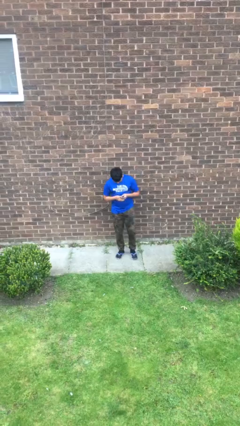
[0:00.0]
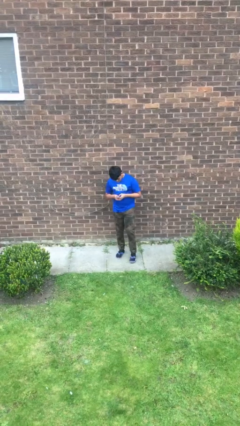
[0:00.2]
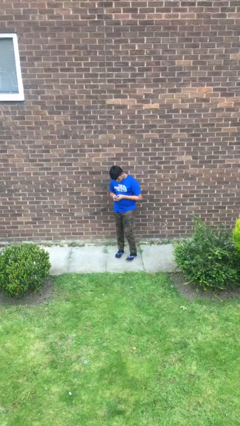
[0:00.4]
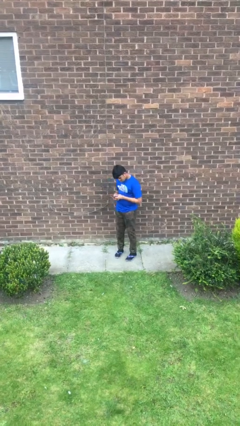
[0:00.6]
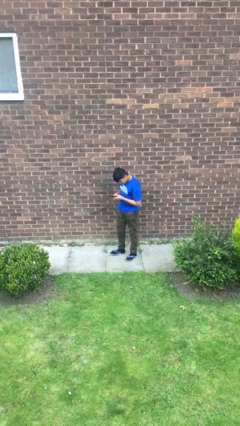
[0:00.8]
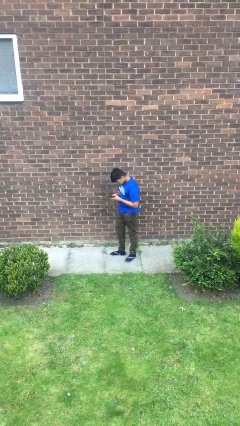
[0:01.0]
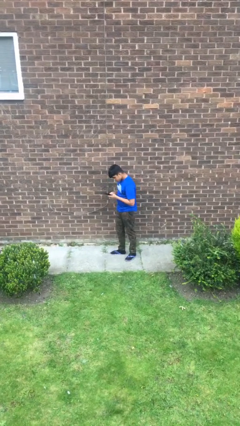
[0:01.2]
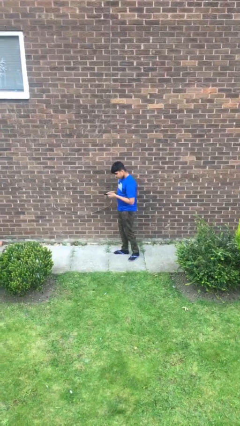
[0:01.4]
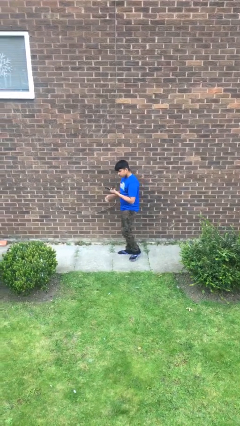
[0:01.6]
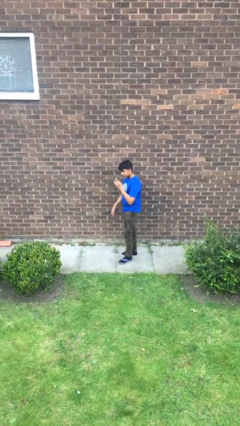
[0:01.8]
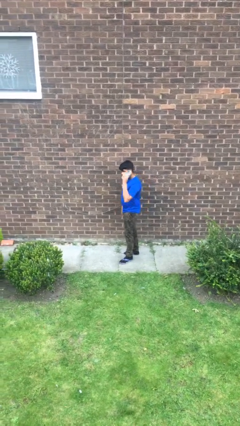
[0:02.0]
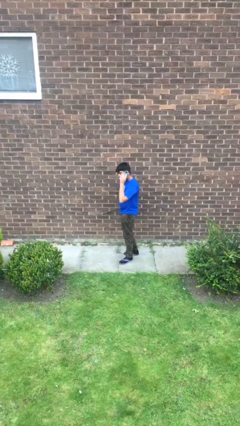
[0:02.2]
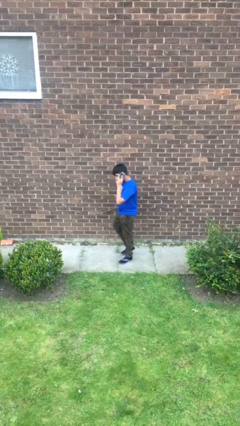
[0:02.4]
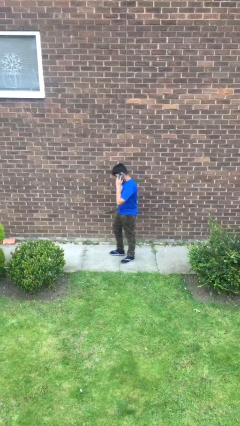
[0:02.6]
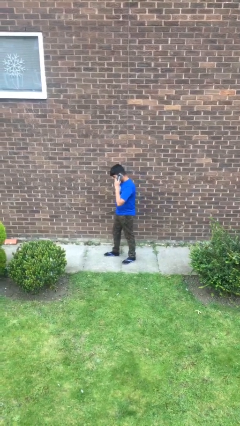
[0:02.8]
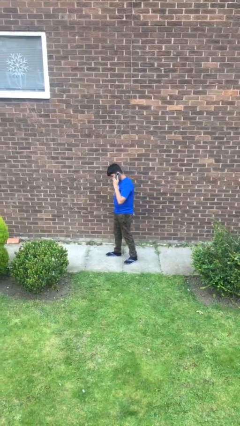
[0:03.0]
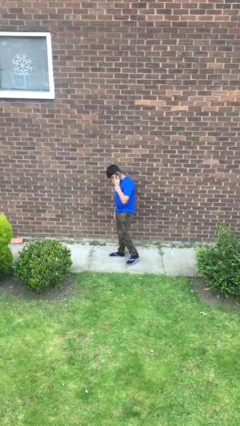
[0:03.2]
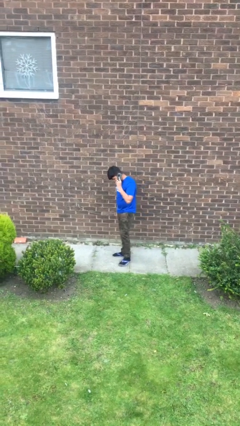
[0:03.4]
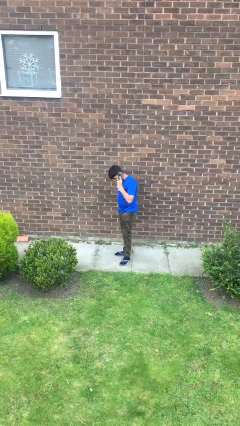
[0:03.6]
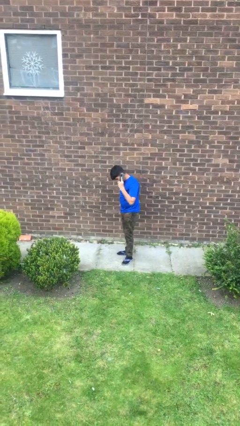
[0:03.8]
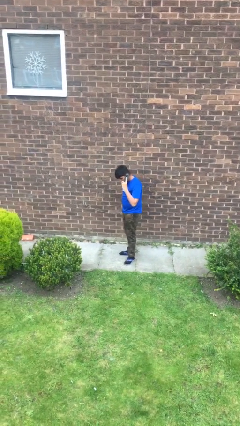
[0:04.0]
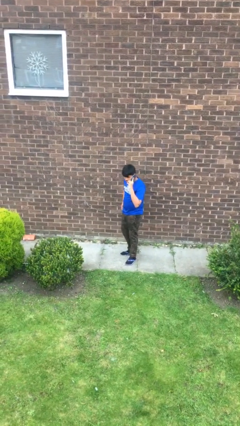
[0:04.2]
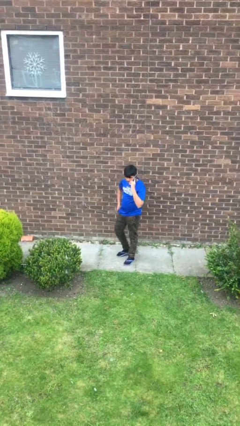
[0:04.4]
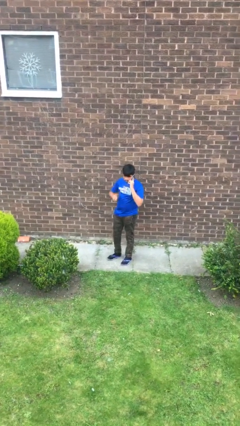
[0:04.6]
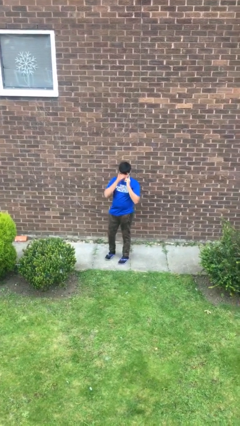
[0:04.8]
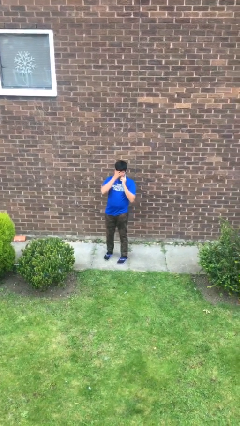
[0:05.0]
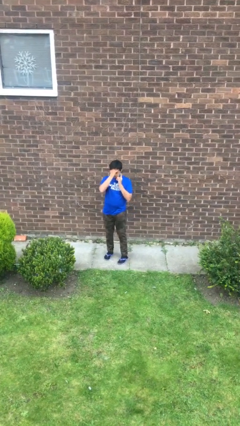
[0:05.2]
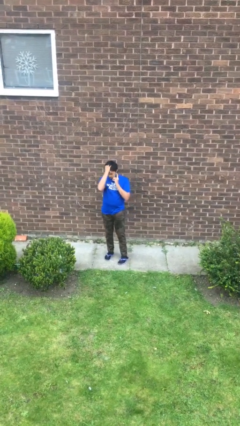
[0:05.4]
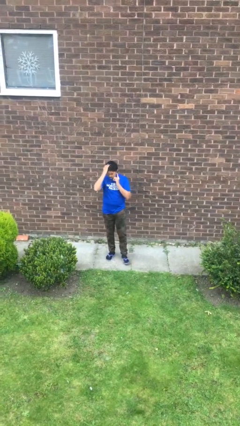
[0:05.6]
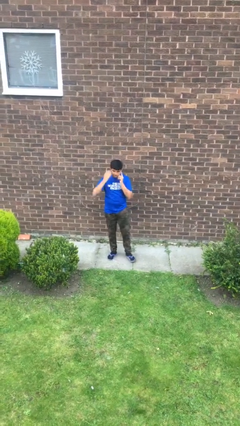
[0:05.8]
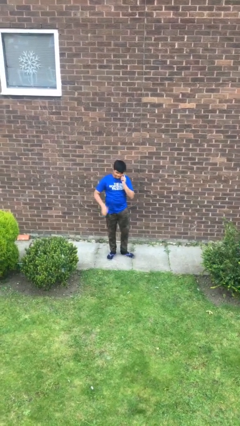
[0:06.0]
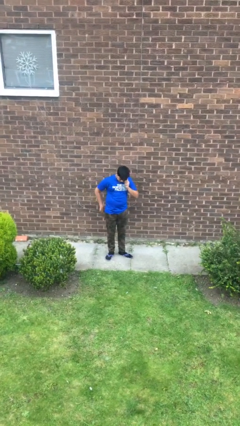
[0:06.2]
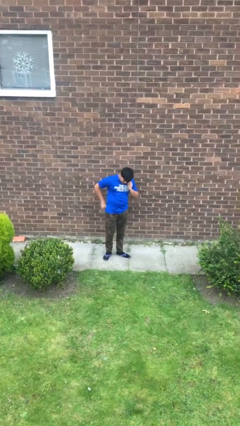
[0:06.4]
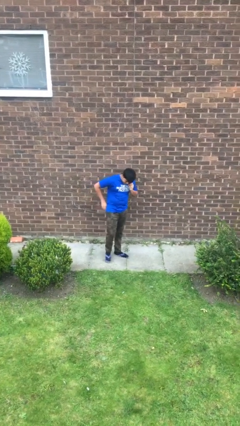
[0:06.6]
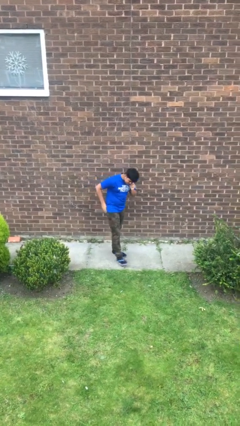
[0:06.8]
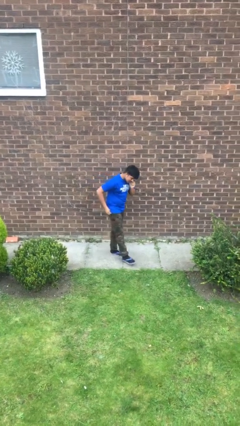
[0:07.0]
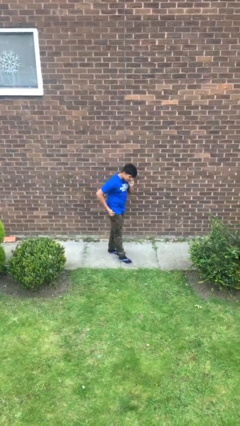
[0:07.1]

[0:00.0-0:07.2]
person talks on phone

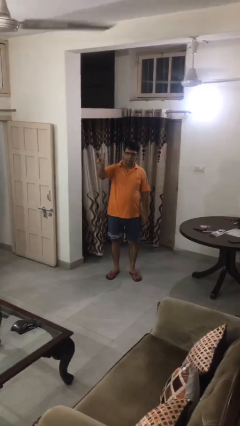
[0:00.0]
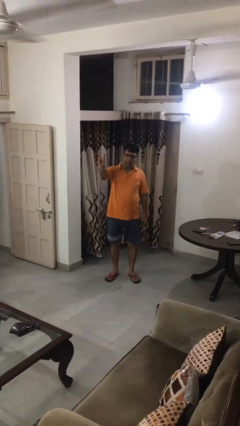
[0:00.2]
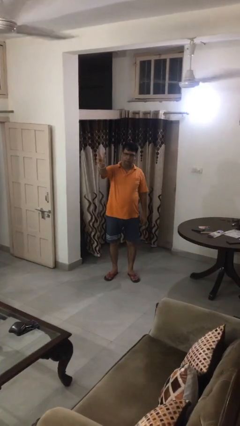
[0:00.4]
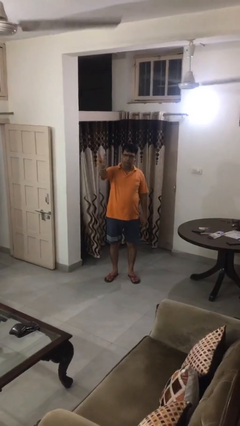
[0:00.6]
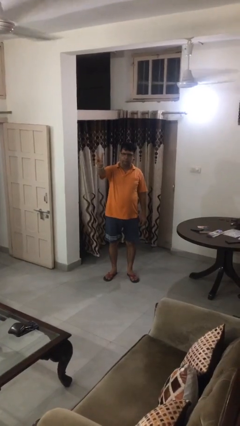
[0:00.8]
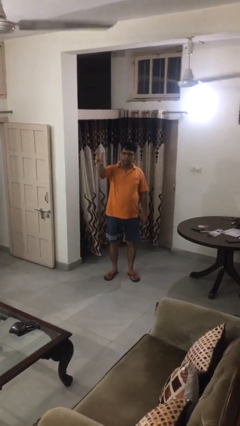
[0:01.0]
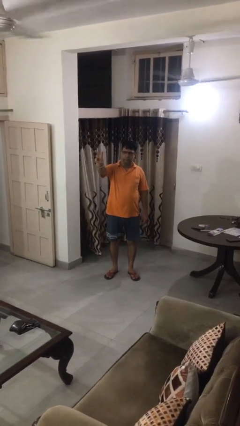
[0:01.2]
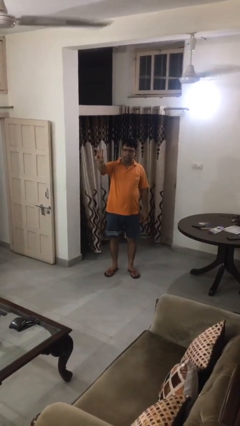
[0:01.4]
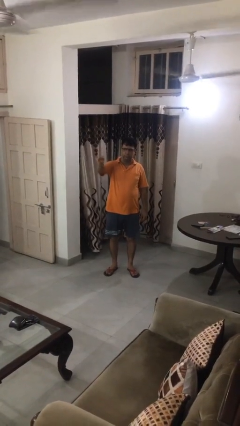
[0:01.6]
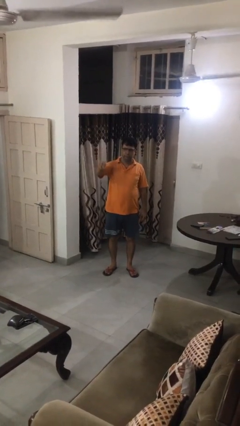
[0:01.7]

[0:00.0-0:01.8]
person gestures peace

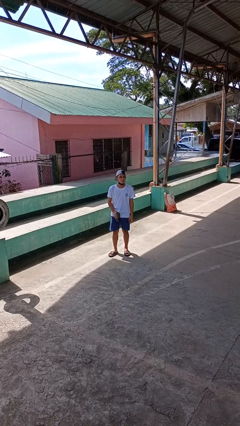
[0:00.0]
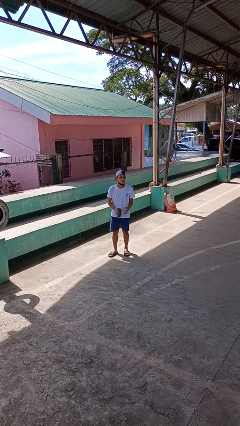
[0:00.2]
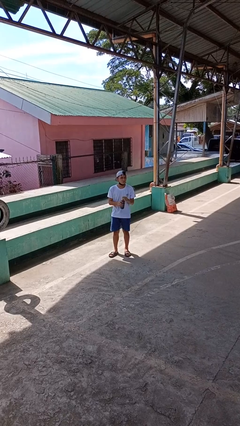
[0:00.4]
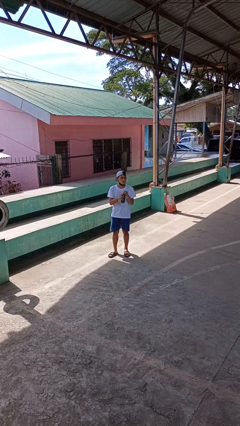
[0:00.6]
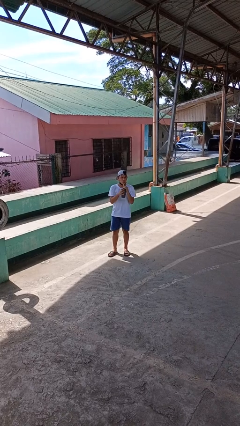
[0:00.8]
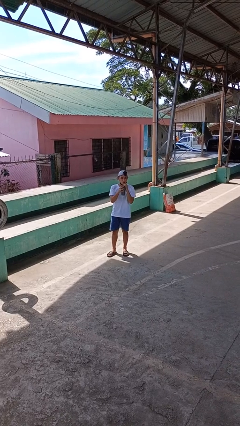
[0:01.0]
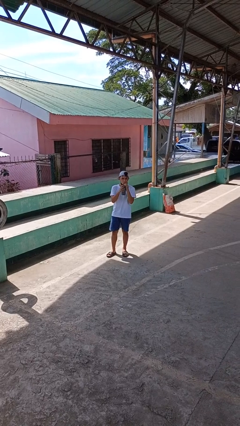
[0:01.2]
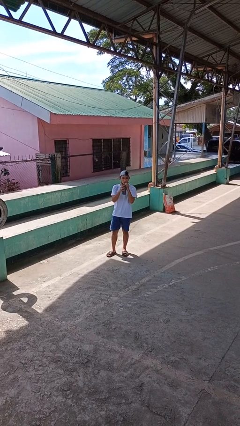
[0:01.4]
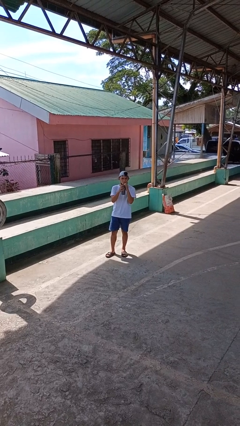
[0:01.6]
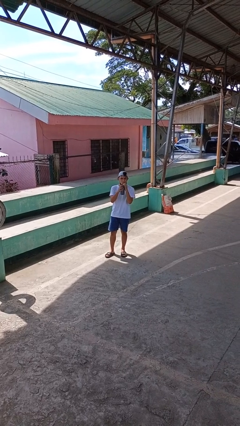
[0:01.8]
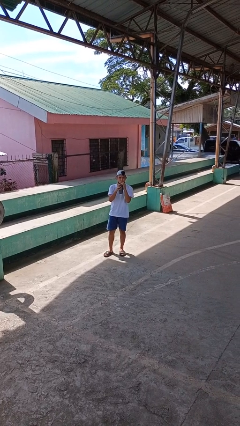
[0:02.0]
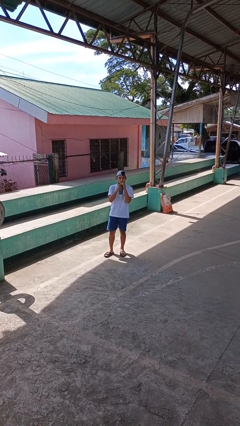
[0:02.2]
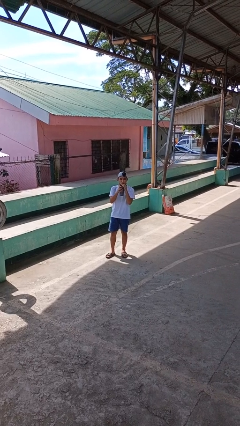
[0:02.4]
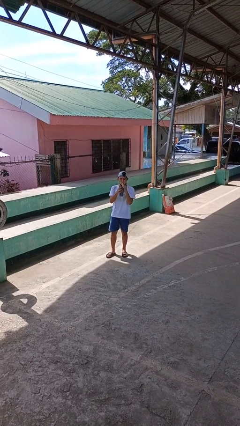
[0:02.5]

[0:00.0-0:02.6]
person drinks from straw

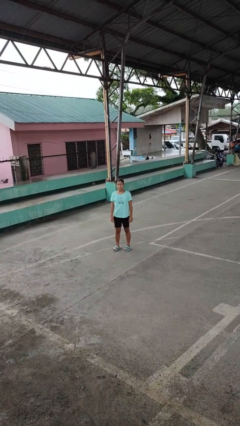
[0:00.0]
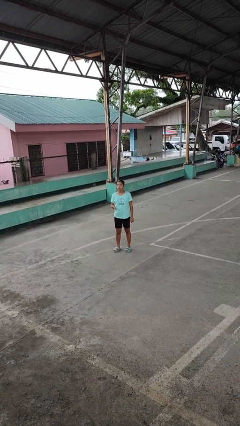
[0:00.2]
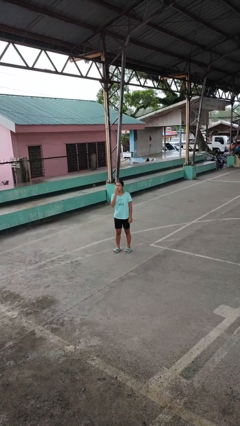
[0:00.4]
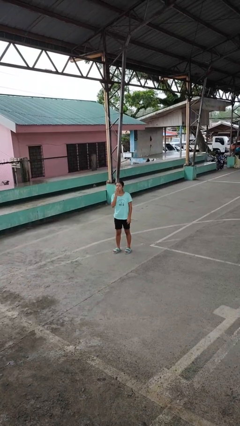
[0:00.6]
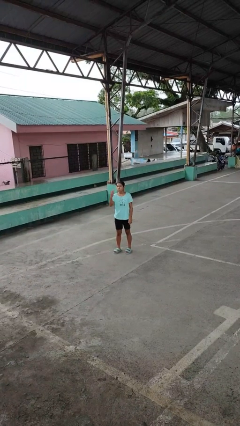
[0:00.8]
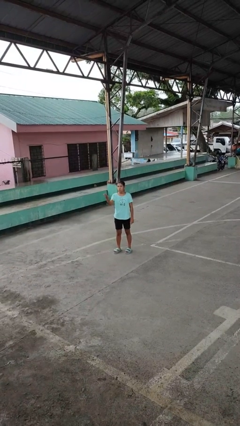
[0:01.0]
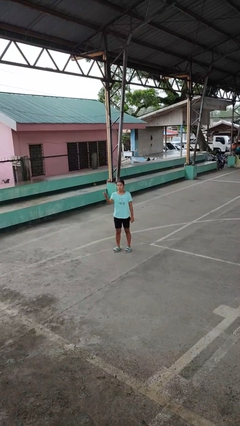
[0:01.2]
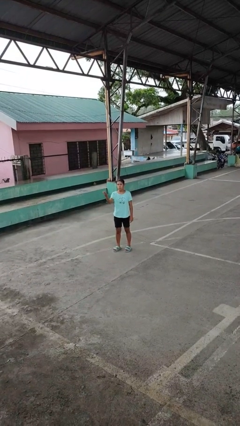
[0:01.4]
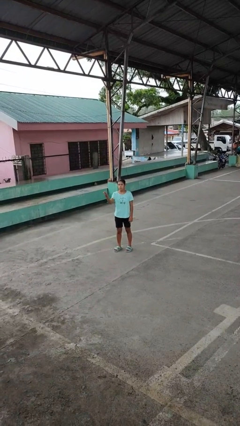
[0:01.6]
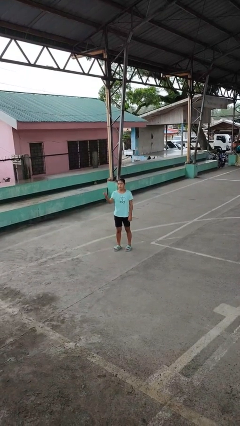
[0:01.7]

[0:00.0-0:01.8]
person gestures blow kiss

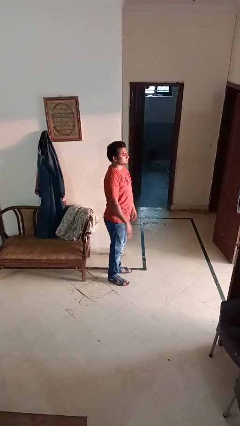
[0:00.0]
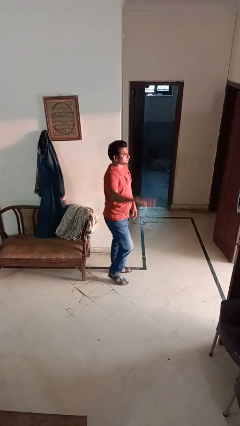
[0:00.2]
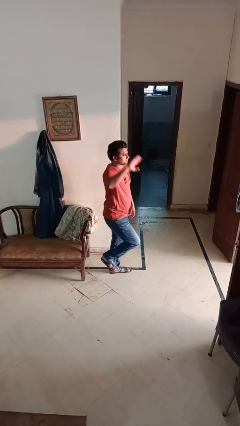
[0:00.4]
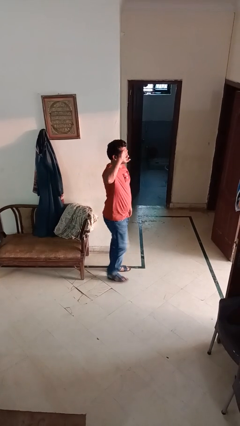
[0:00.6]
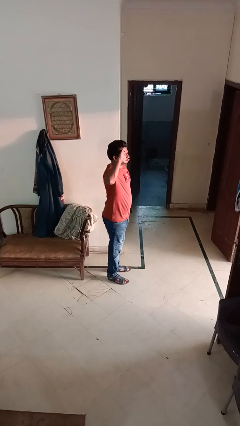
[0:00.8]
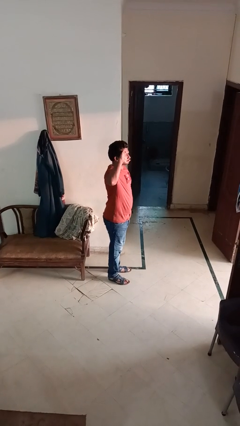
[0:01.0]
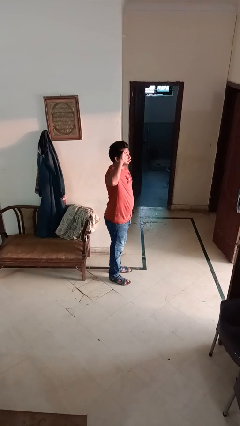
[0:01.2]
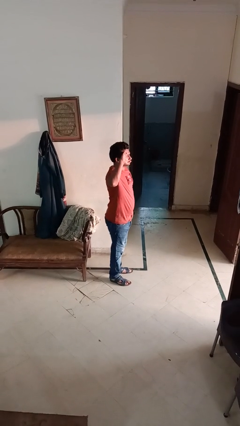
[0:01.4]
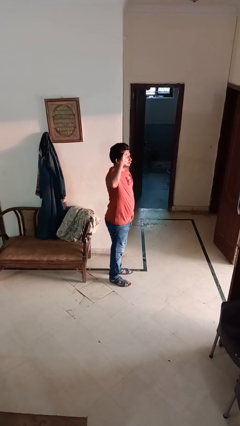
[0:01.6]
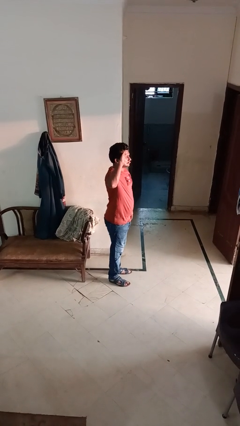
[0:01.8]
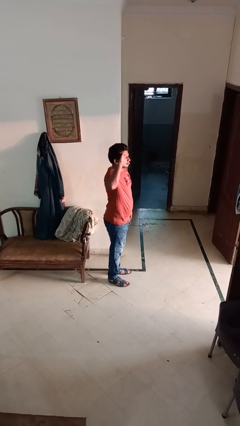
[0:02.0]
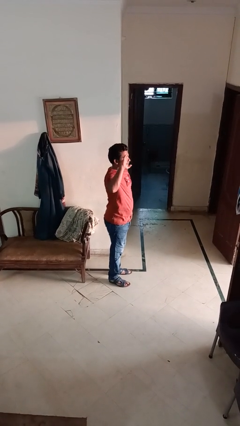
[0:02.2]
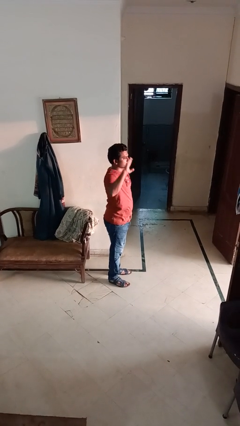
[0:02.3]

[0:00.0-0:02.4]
person salutes

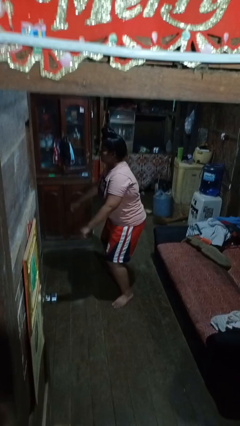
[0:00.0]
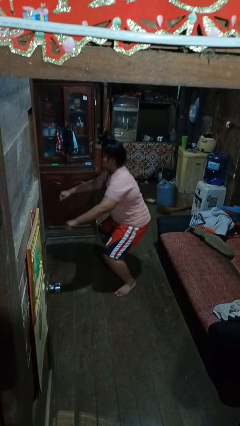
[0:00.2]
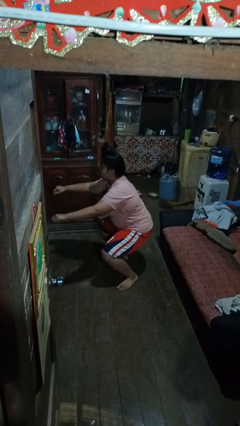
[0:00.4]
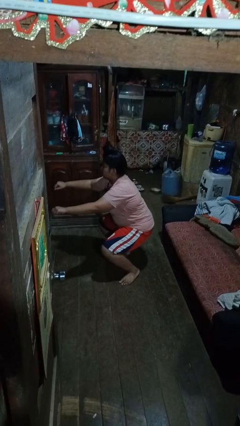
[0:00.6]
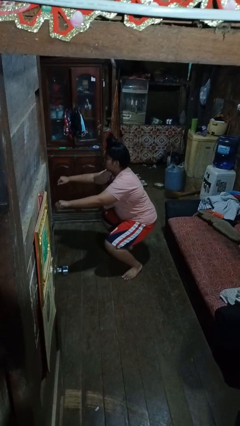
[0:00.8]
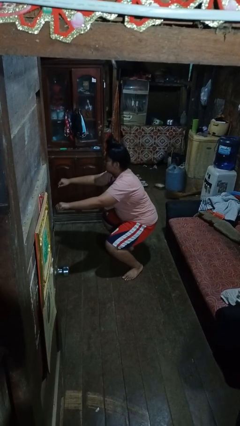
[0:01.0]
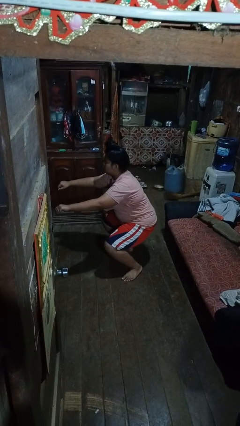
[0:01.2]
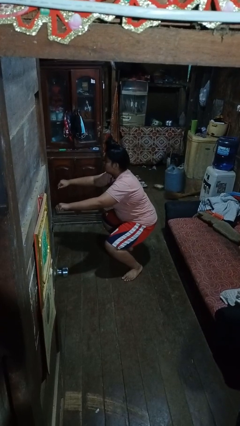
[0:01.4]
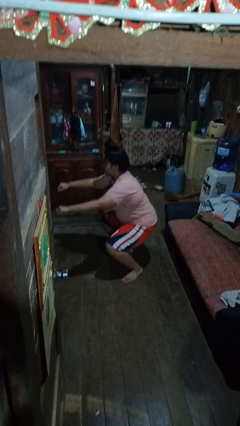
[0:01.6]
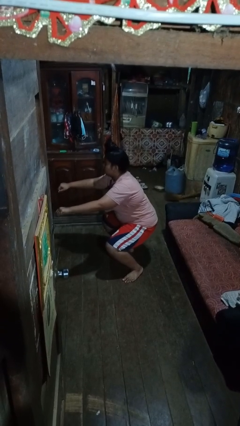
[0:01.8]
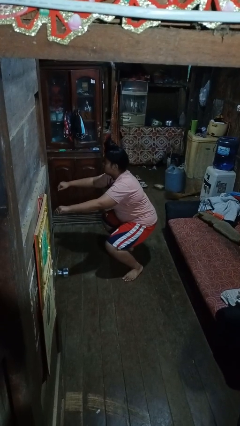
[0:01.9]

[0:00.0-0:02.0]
person squats
